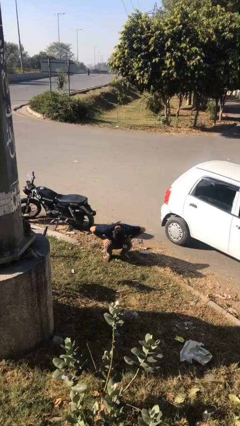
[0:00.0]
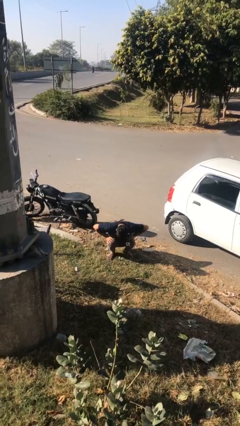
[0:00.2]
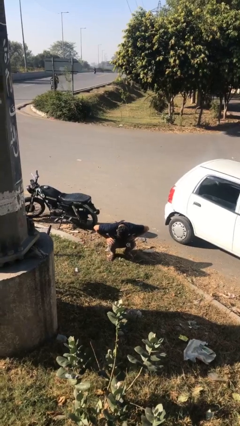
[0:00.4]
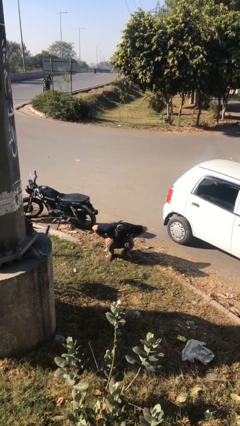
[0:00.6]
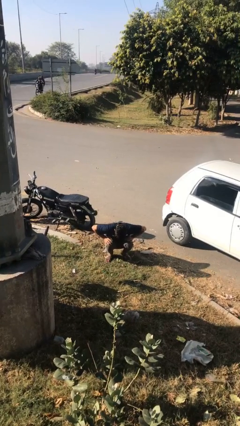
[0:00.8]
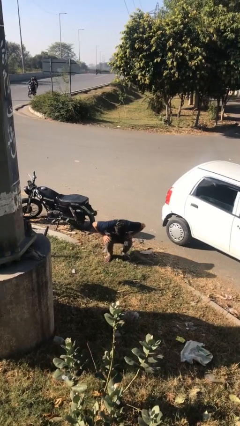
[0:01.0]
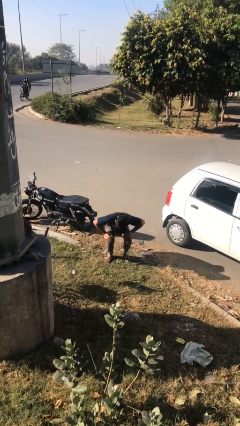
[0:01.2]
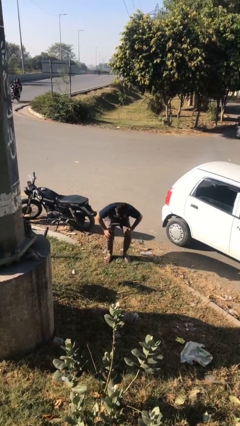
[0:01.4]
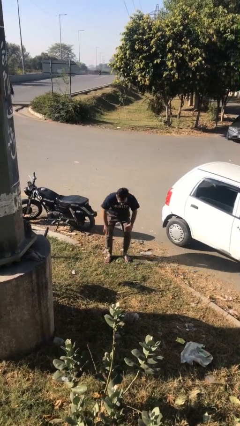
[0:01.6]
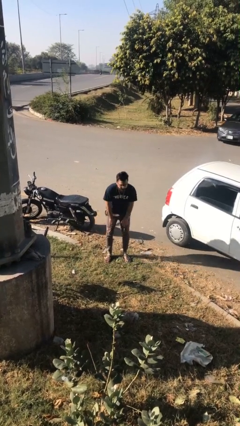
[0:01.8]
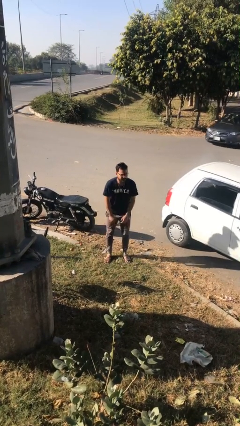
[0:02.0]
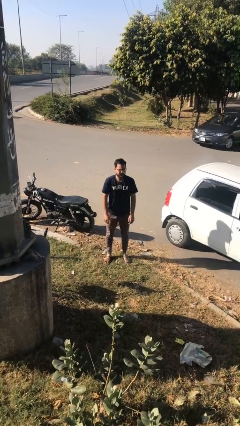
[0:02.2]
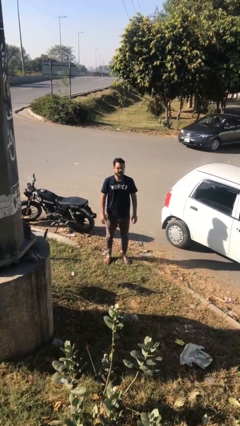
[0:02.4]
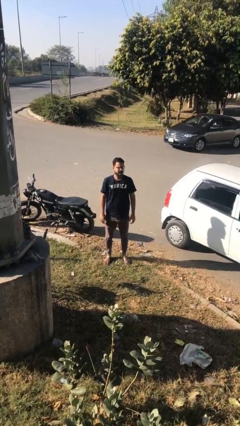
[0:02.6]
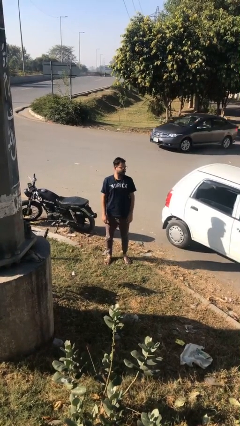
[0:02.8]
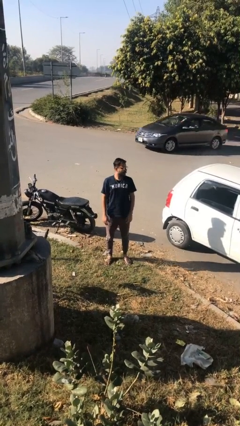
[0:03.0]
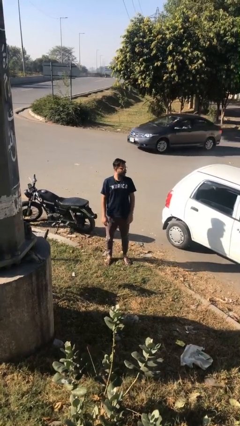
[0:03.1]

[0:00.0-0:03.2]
person stands up

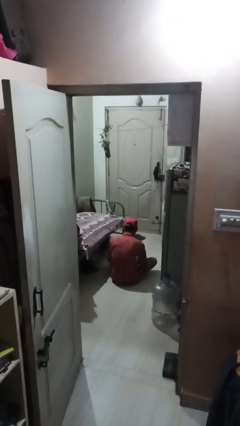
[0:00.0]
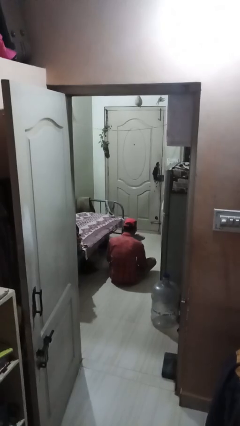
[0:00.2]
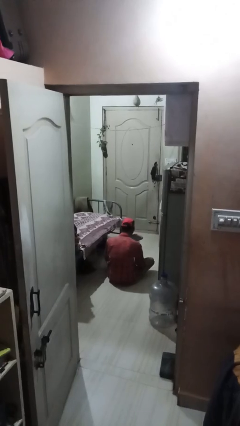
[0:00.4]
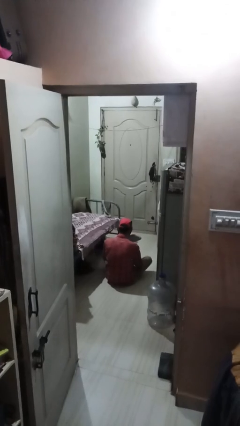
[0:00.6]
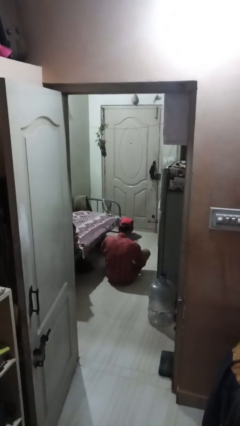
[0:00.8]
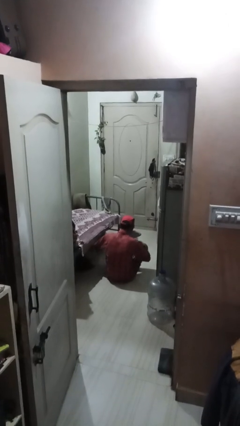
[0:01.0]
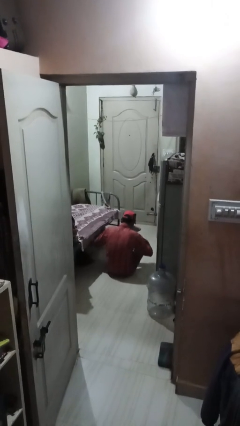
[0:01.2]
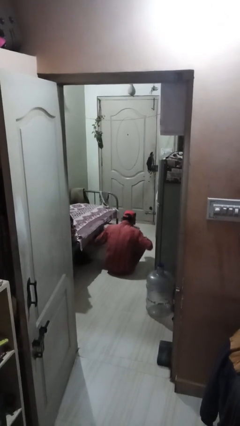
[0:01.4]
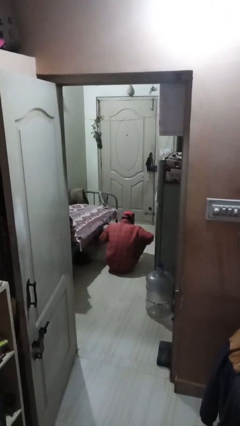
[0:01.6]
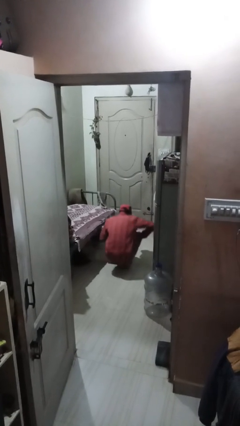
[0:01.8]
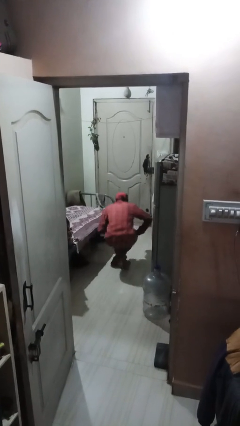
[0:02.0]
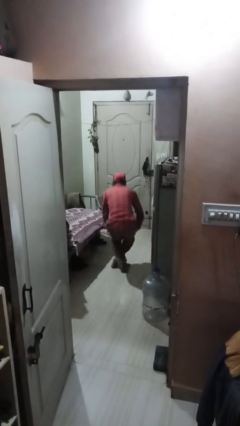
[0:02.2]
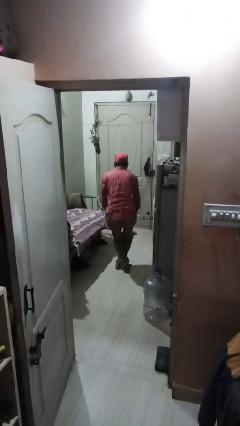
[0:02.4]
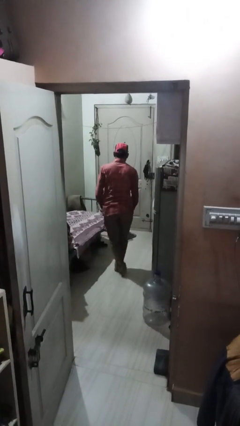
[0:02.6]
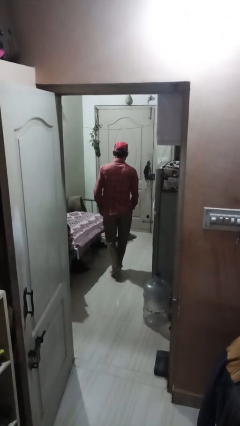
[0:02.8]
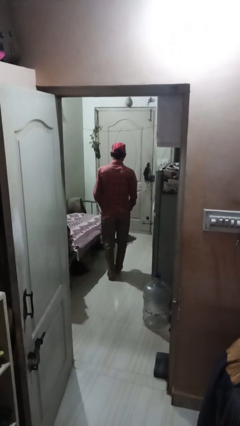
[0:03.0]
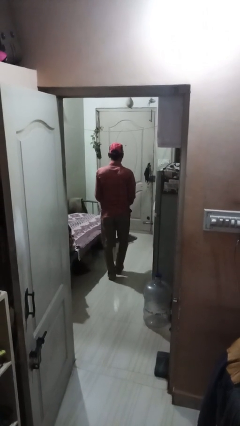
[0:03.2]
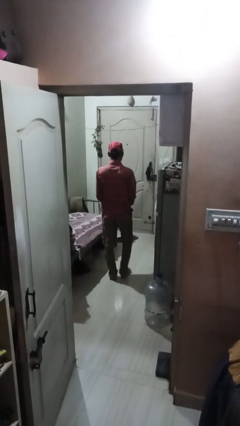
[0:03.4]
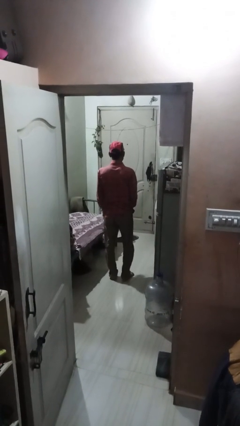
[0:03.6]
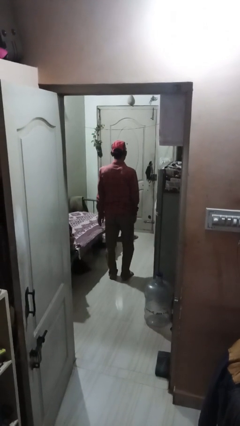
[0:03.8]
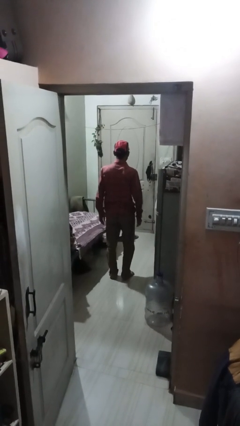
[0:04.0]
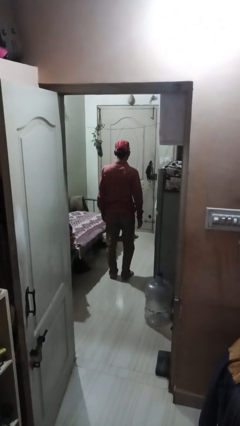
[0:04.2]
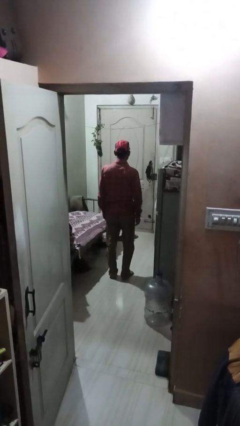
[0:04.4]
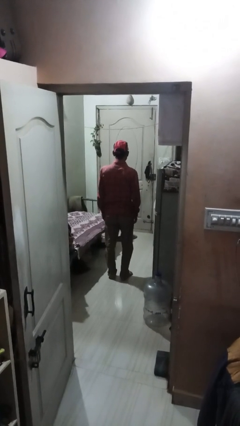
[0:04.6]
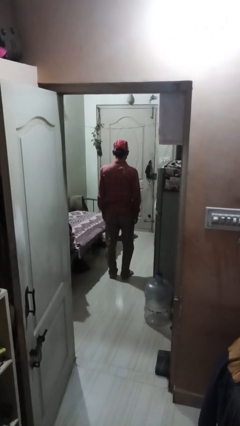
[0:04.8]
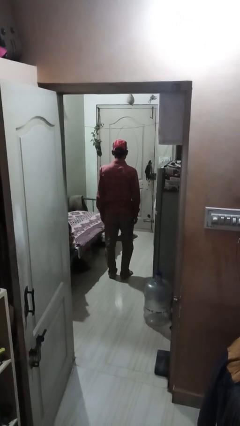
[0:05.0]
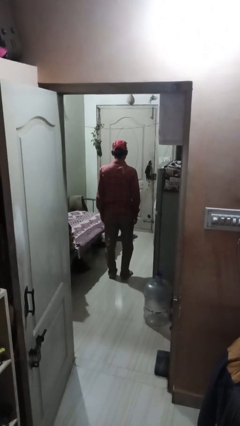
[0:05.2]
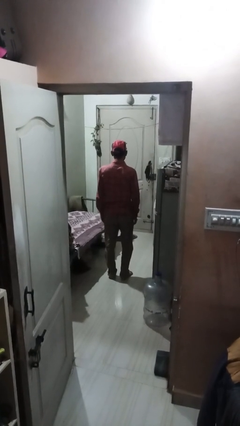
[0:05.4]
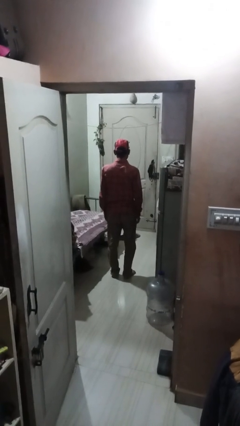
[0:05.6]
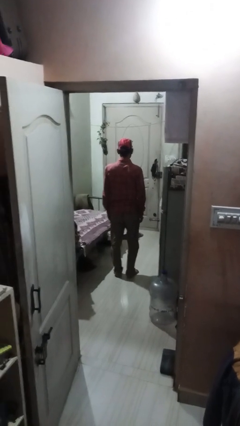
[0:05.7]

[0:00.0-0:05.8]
person stands up from floor

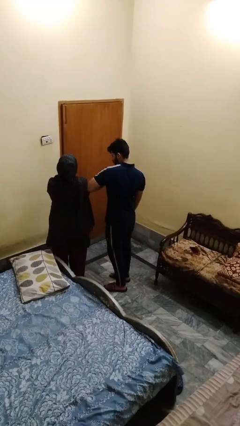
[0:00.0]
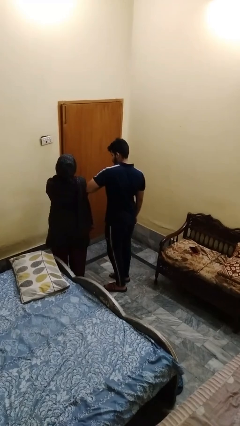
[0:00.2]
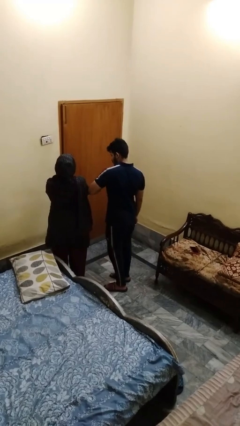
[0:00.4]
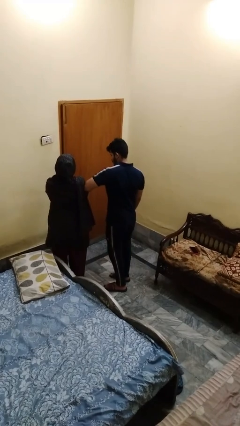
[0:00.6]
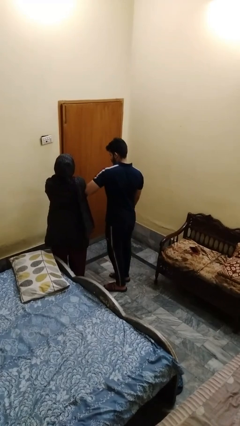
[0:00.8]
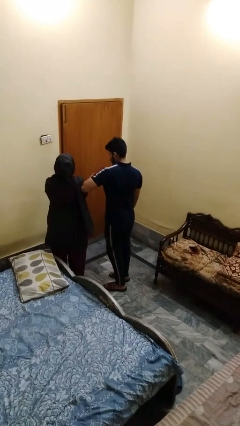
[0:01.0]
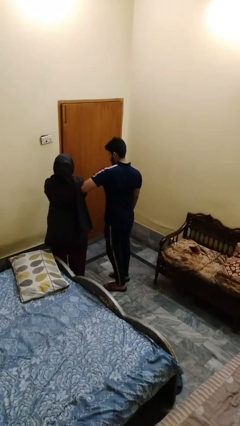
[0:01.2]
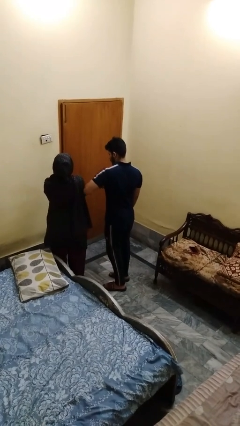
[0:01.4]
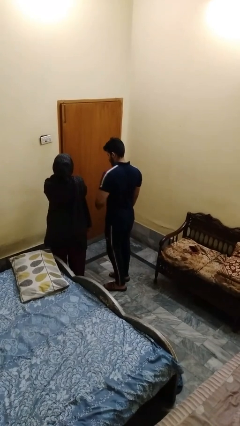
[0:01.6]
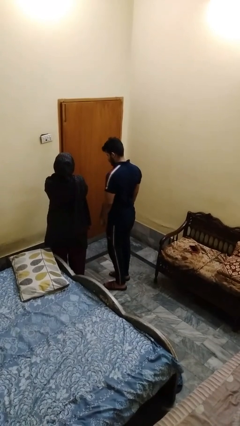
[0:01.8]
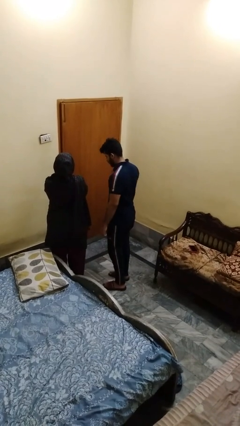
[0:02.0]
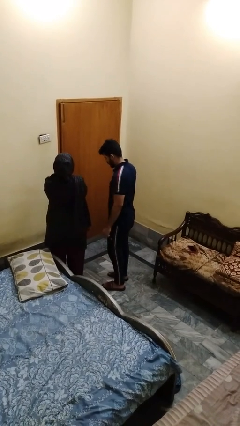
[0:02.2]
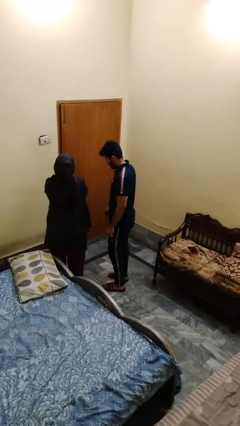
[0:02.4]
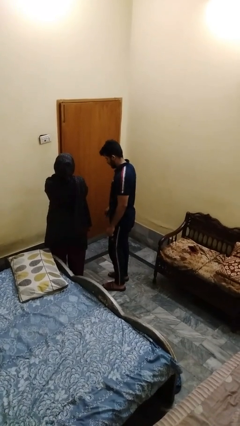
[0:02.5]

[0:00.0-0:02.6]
person nudges person with elbow

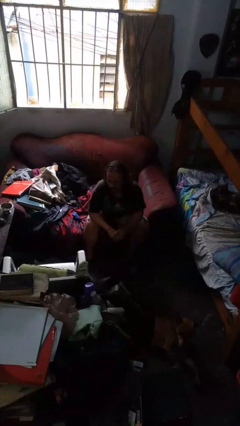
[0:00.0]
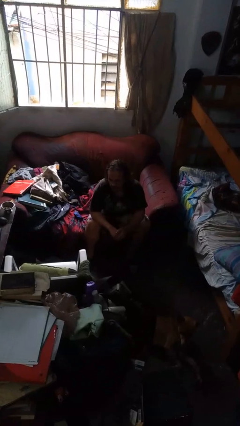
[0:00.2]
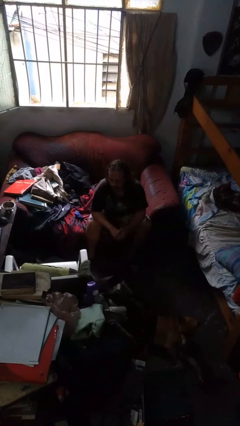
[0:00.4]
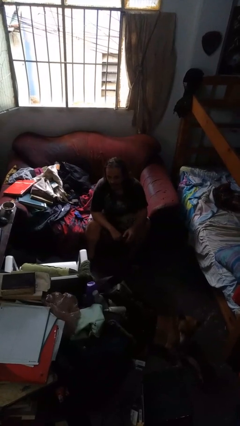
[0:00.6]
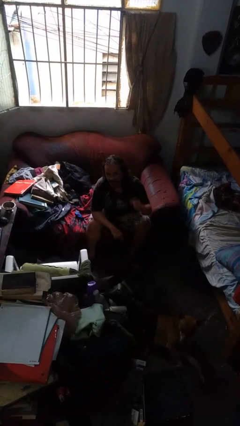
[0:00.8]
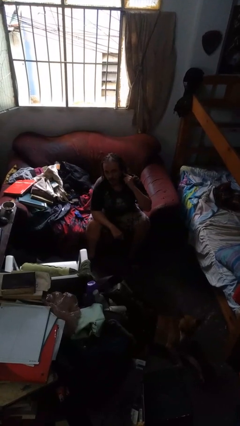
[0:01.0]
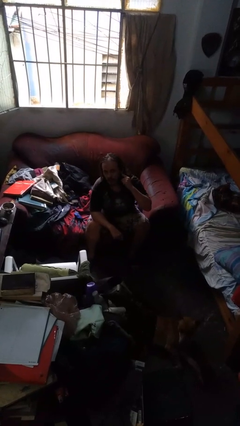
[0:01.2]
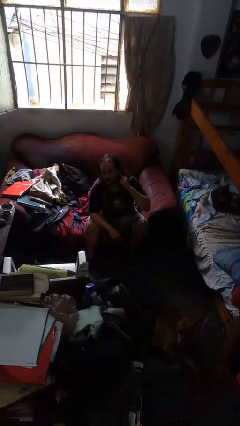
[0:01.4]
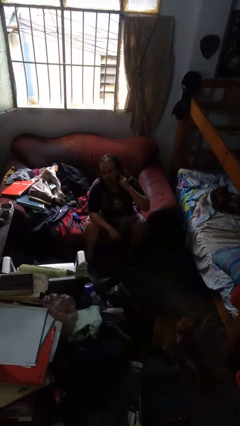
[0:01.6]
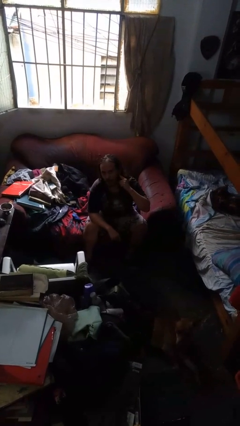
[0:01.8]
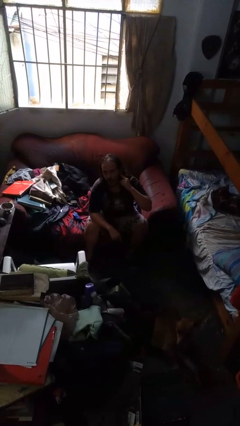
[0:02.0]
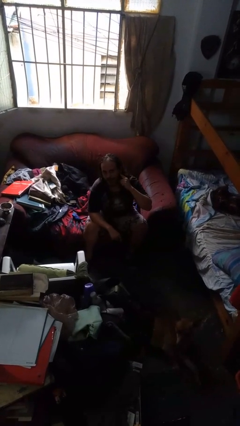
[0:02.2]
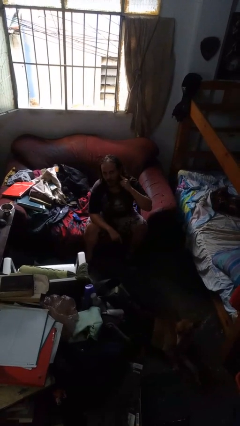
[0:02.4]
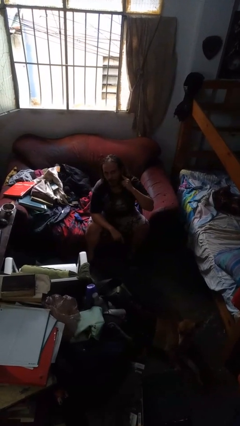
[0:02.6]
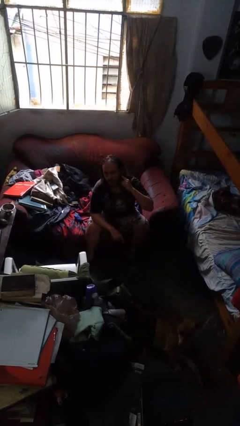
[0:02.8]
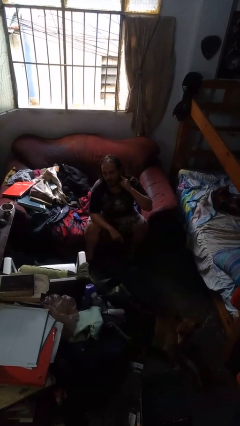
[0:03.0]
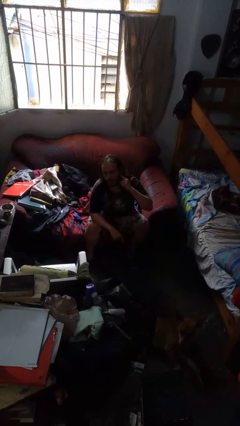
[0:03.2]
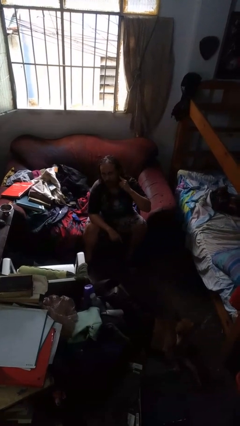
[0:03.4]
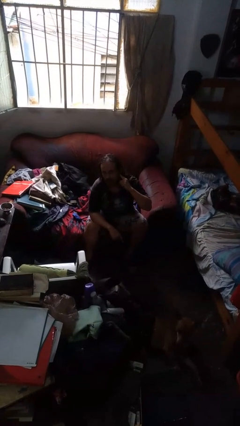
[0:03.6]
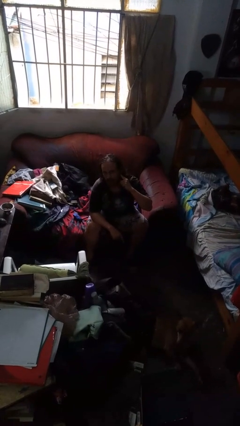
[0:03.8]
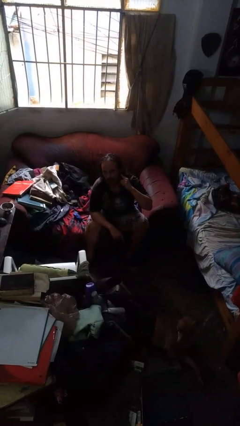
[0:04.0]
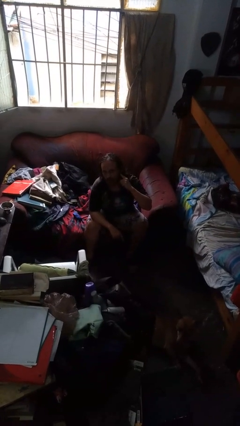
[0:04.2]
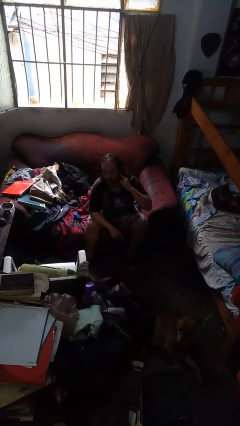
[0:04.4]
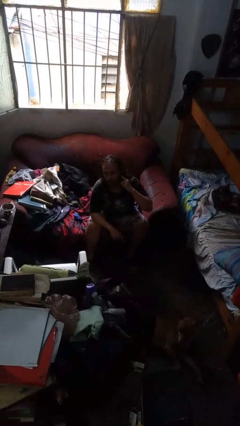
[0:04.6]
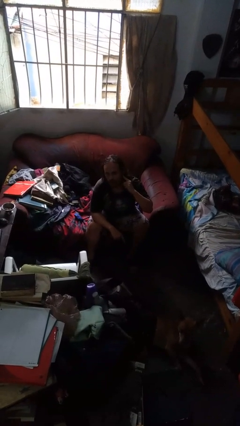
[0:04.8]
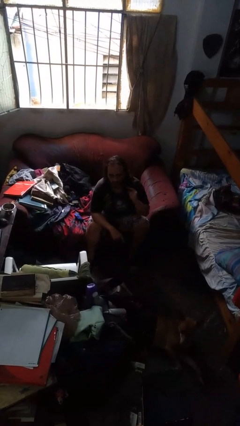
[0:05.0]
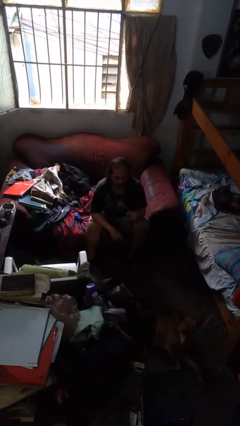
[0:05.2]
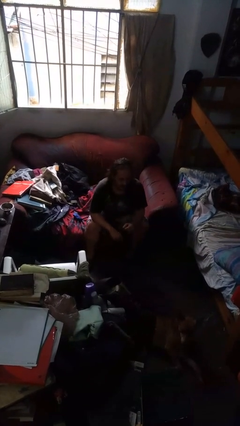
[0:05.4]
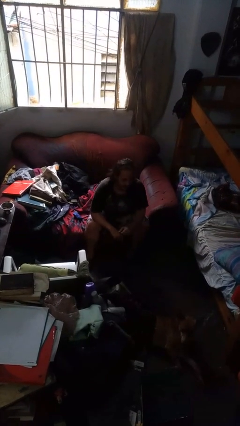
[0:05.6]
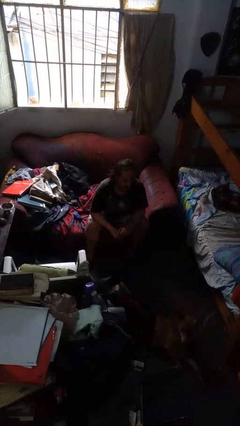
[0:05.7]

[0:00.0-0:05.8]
person gestures listen closely

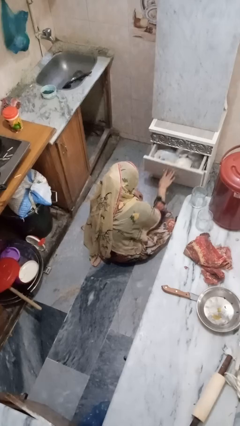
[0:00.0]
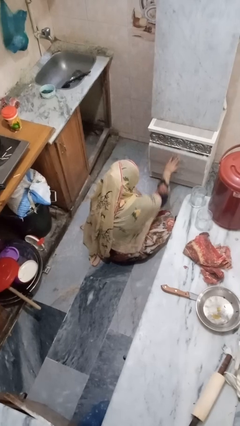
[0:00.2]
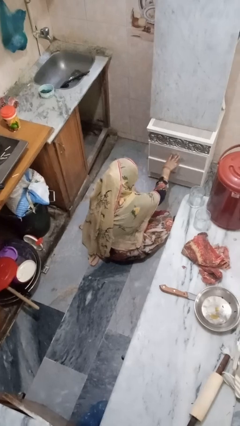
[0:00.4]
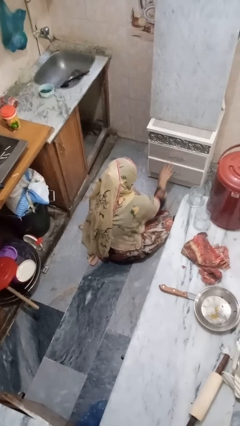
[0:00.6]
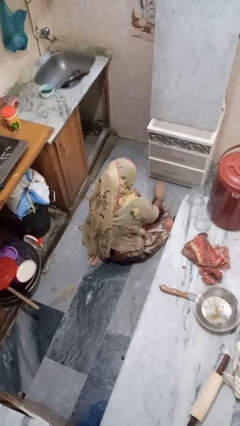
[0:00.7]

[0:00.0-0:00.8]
person closes kitchen drawer
